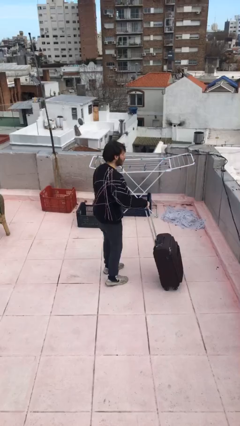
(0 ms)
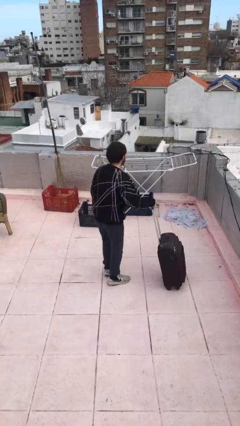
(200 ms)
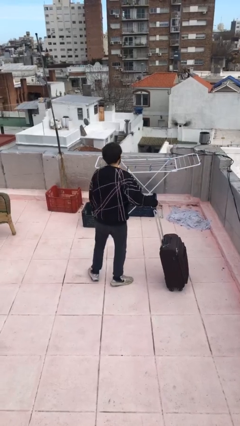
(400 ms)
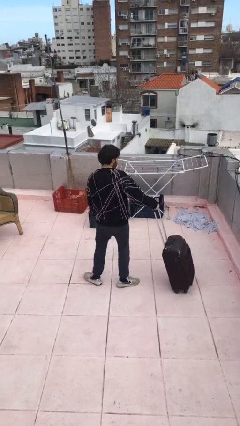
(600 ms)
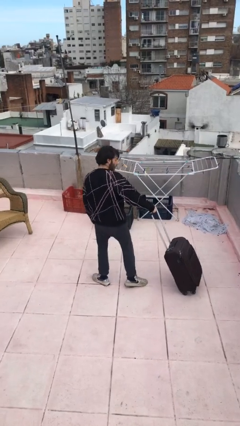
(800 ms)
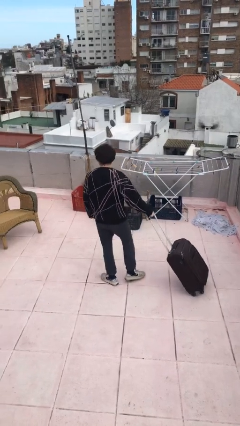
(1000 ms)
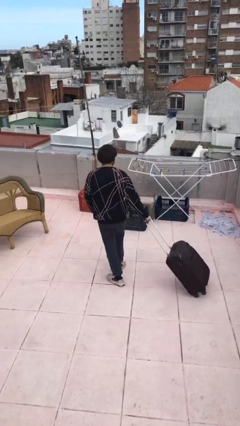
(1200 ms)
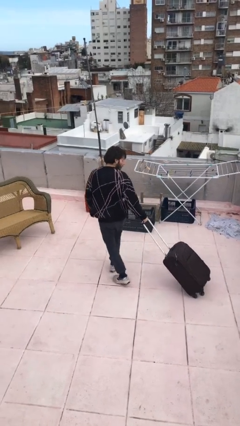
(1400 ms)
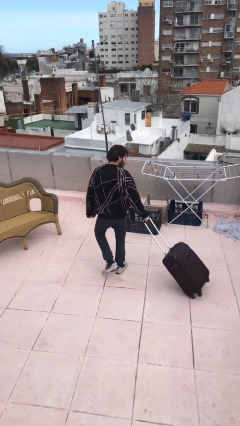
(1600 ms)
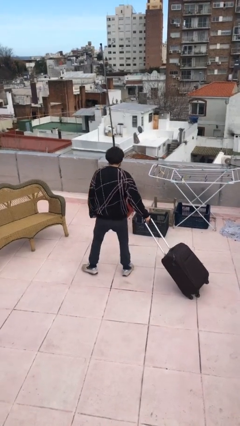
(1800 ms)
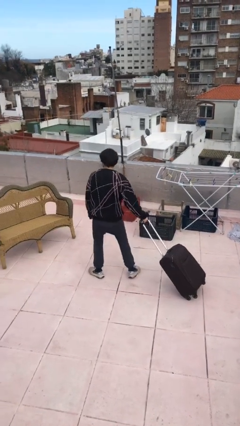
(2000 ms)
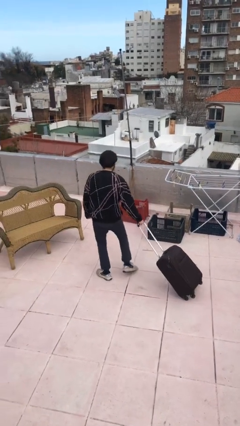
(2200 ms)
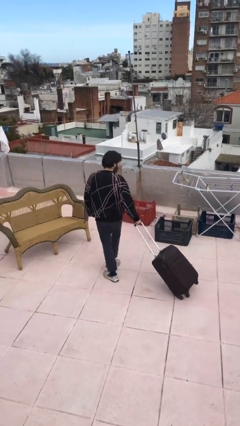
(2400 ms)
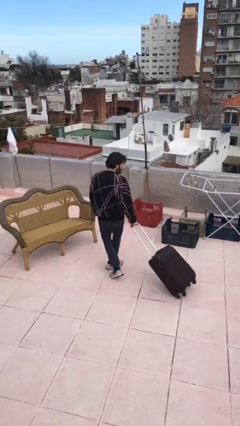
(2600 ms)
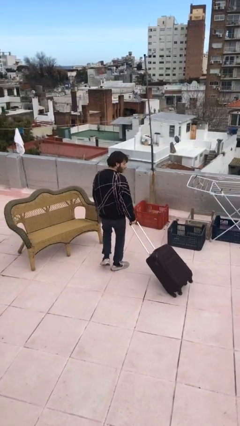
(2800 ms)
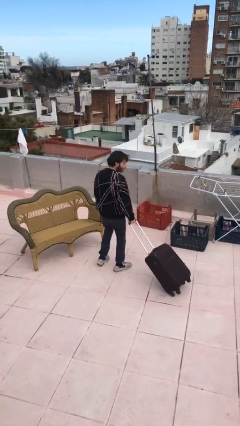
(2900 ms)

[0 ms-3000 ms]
person pulls wheeled cart

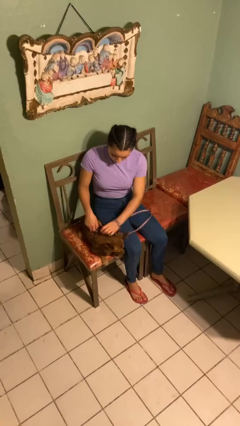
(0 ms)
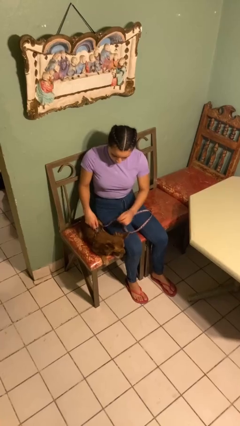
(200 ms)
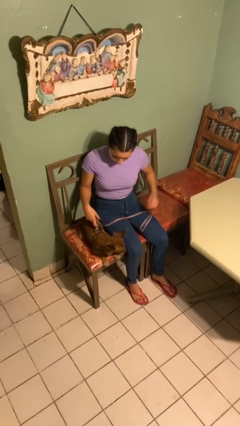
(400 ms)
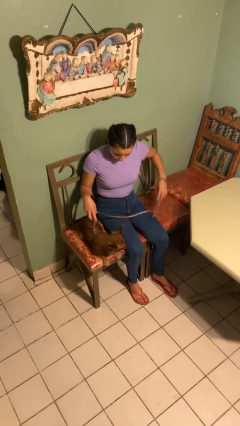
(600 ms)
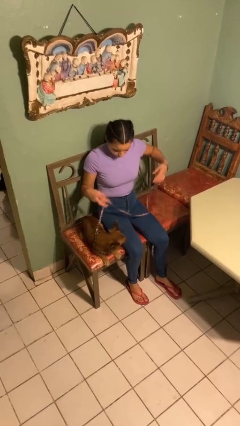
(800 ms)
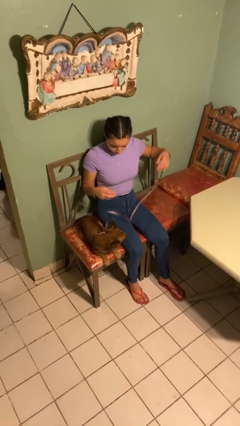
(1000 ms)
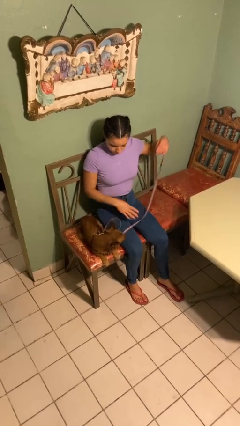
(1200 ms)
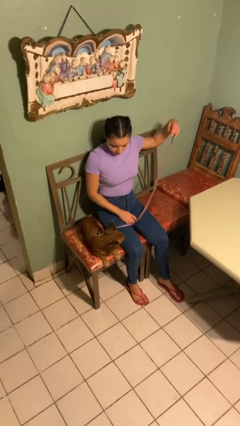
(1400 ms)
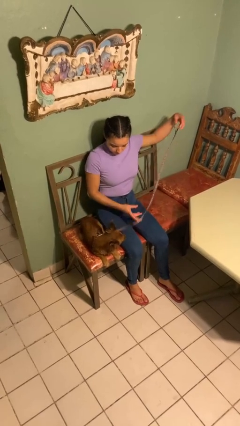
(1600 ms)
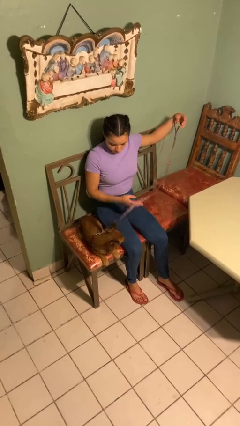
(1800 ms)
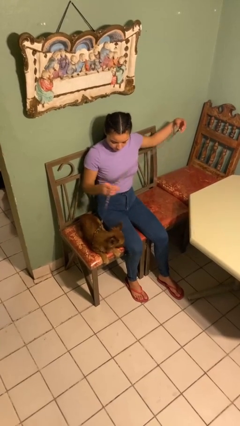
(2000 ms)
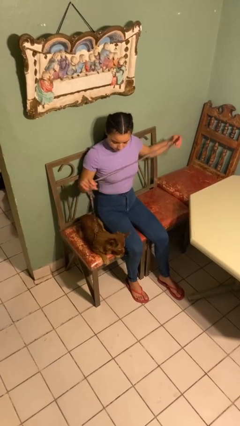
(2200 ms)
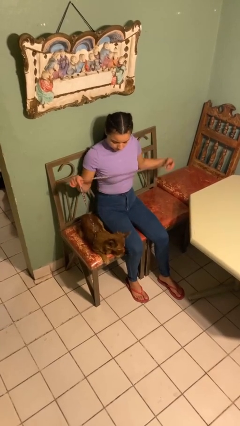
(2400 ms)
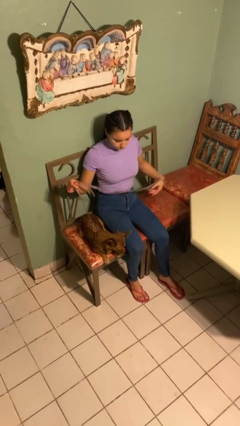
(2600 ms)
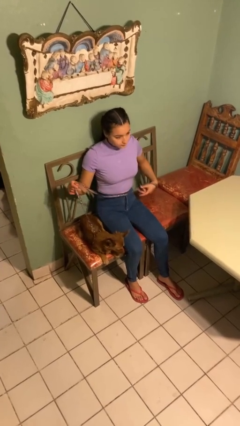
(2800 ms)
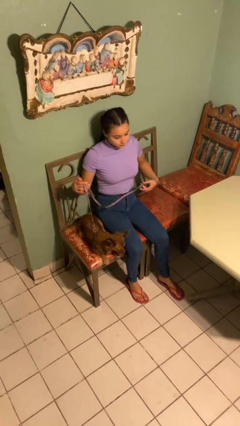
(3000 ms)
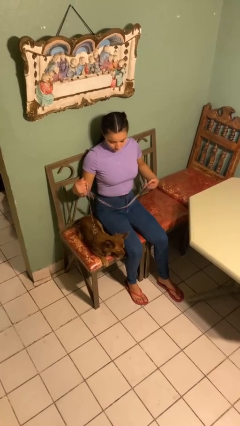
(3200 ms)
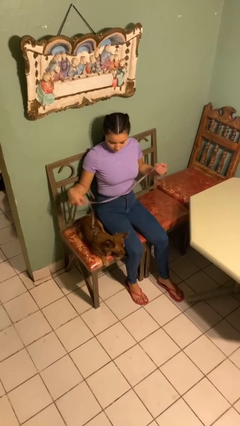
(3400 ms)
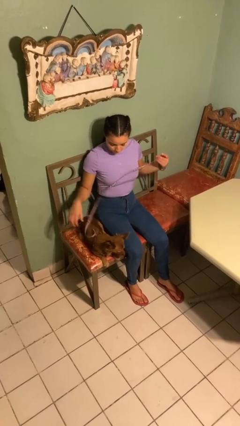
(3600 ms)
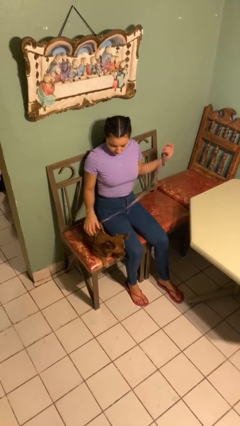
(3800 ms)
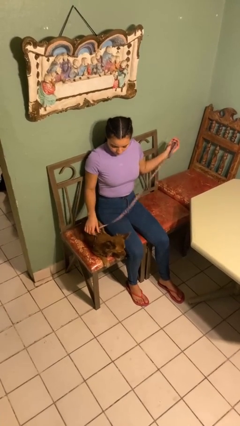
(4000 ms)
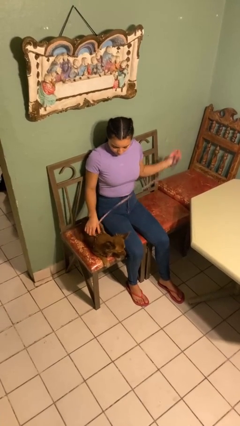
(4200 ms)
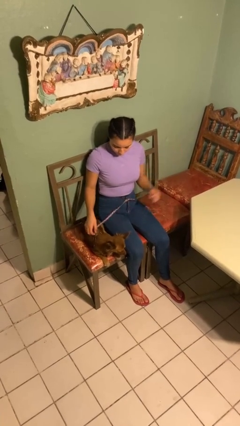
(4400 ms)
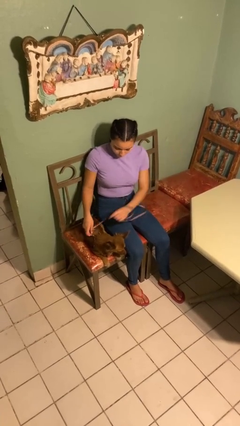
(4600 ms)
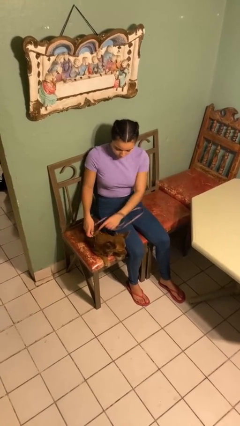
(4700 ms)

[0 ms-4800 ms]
person attaches leash to dog

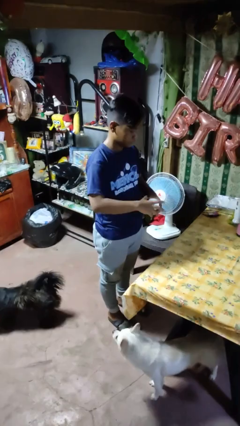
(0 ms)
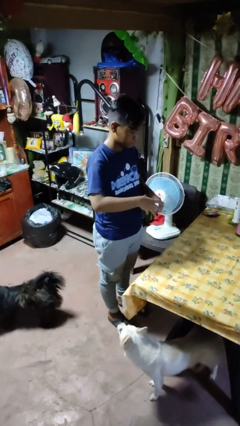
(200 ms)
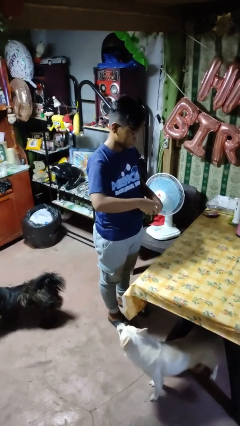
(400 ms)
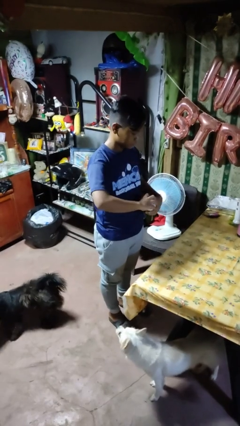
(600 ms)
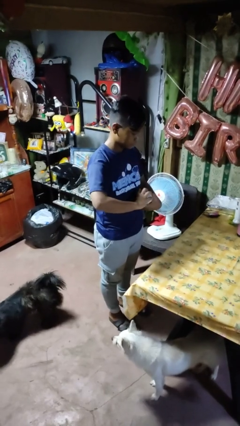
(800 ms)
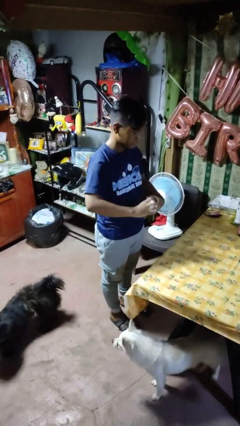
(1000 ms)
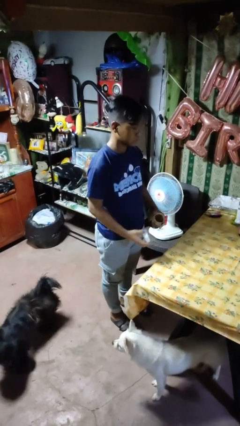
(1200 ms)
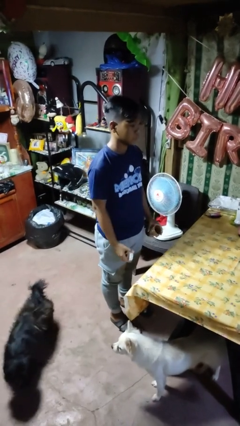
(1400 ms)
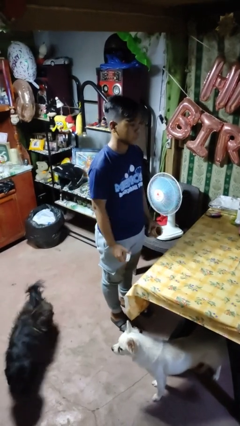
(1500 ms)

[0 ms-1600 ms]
person opens jar

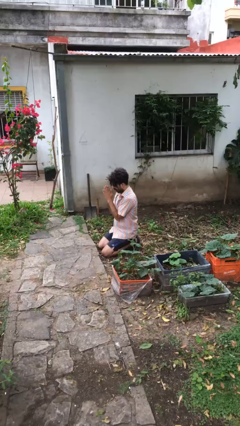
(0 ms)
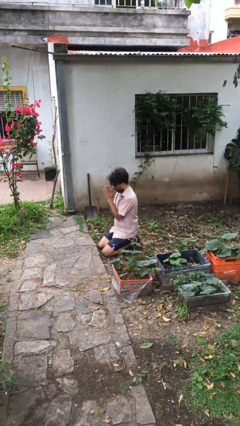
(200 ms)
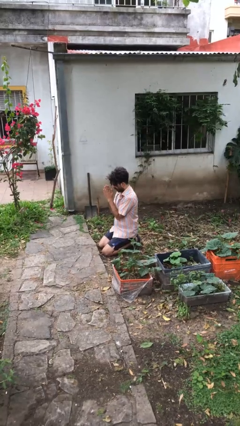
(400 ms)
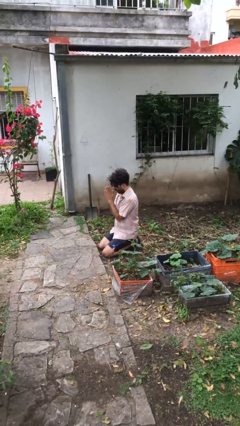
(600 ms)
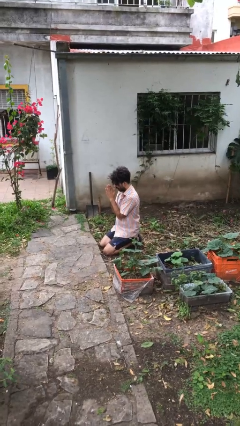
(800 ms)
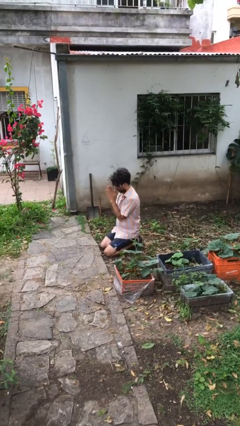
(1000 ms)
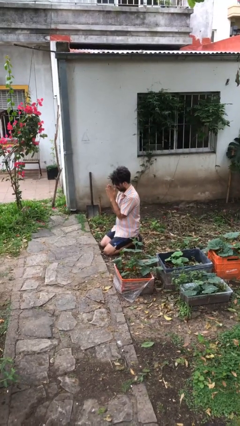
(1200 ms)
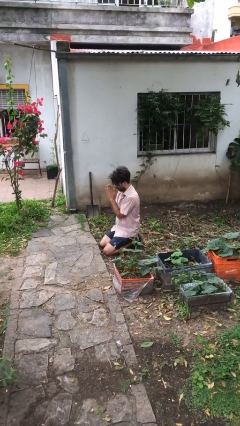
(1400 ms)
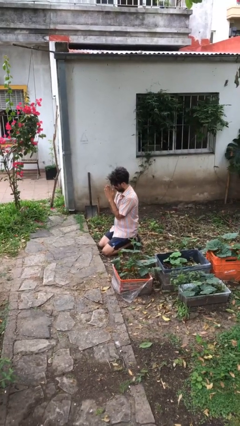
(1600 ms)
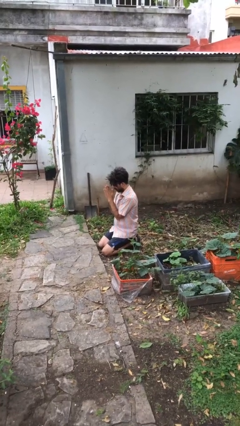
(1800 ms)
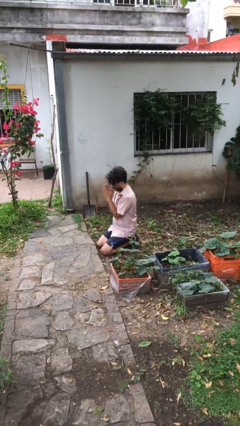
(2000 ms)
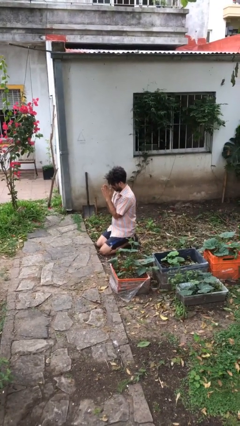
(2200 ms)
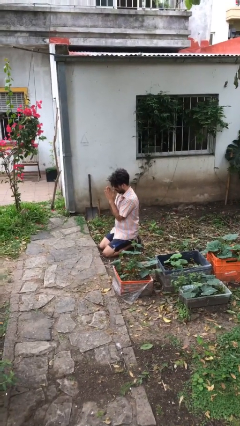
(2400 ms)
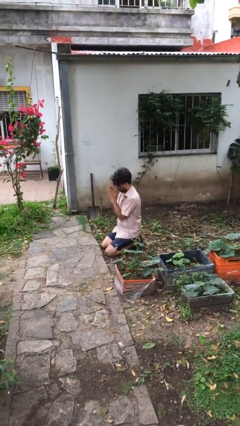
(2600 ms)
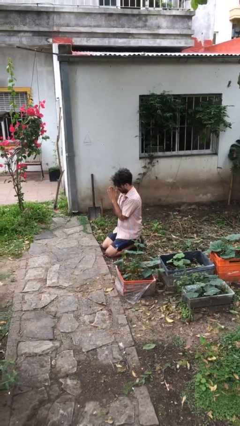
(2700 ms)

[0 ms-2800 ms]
person prays

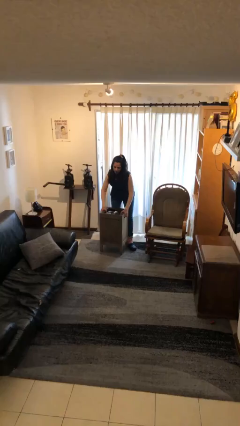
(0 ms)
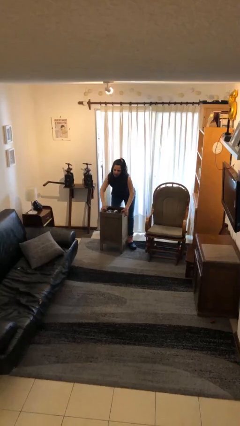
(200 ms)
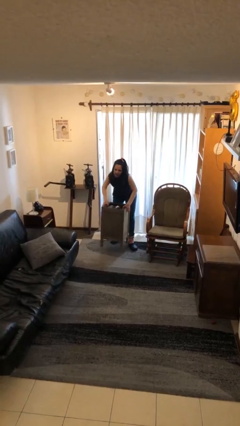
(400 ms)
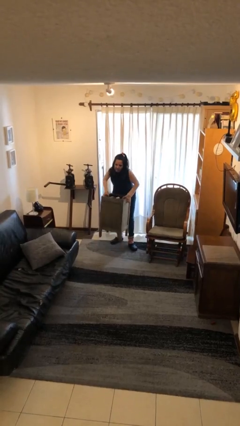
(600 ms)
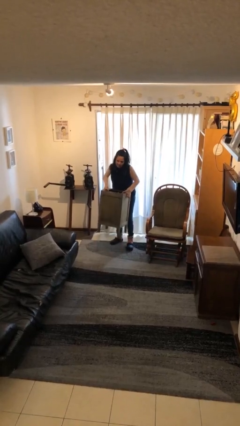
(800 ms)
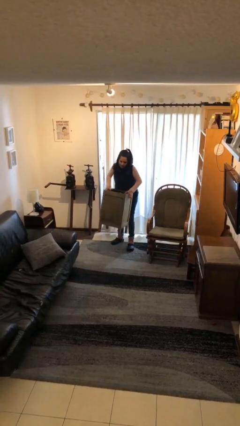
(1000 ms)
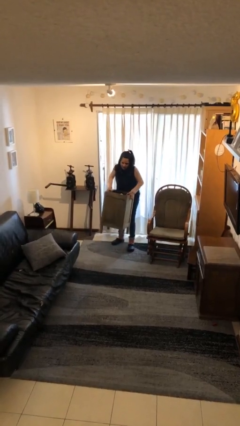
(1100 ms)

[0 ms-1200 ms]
person picks up object from floor

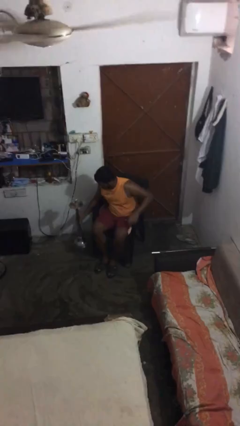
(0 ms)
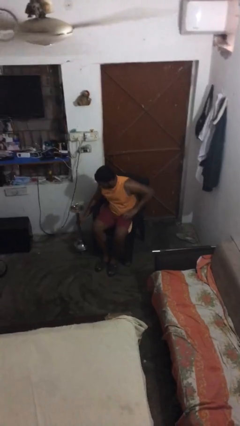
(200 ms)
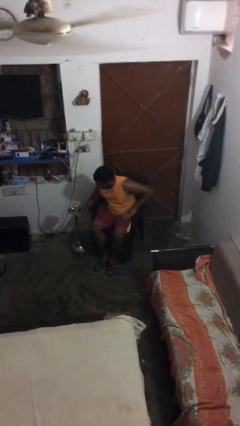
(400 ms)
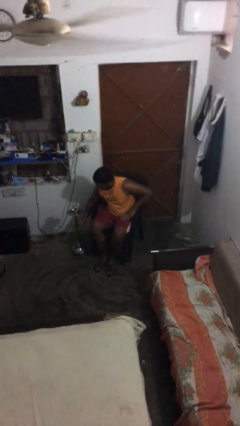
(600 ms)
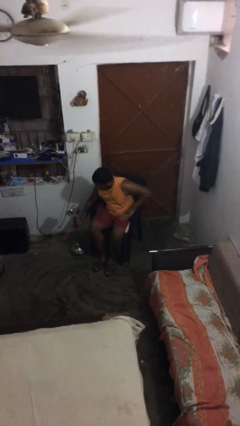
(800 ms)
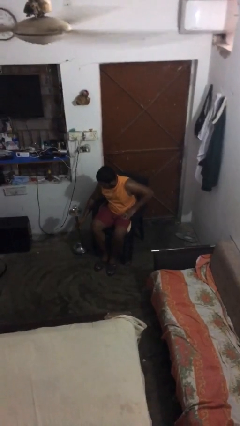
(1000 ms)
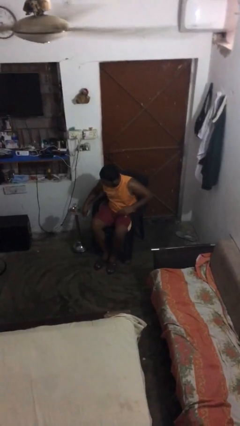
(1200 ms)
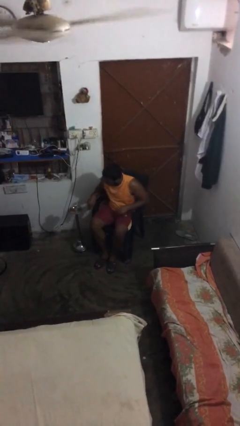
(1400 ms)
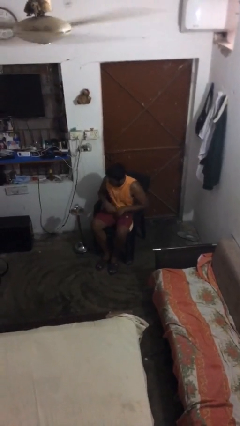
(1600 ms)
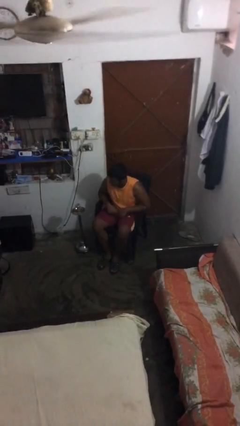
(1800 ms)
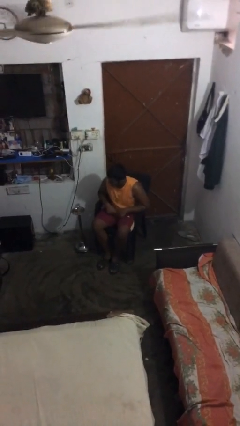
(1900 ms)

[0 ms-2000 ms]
person puts down object on floor

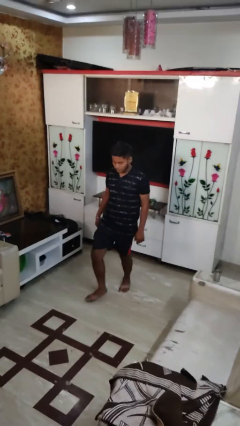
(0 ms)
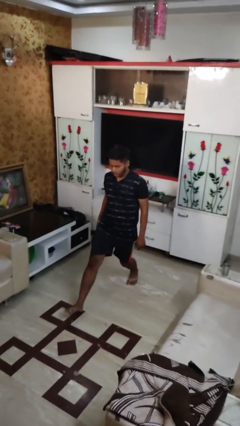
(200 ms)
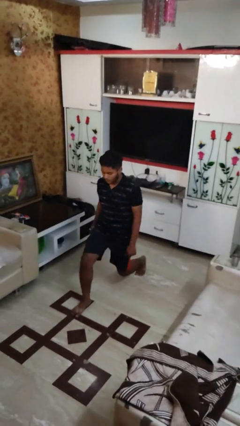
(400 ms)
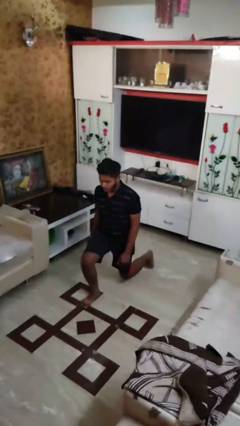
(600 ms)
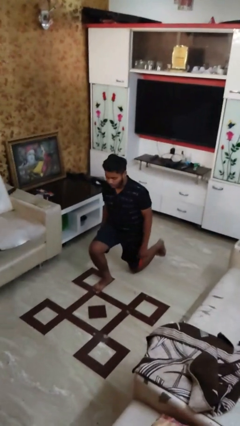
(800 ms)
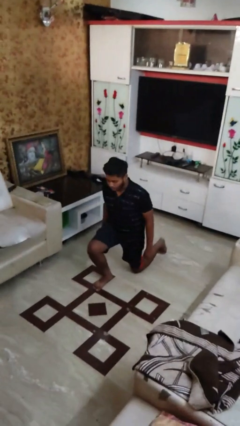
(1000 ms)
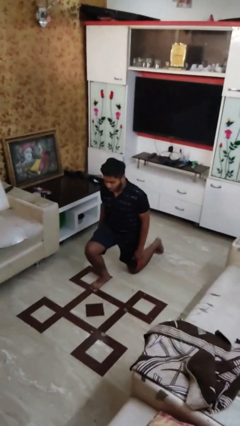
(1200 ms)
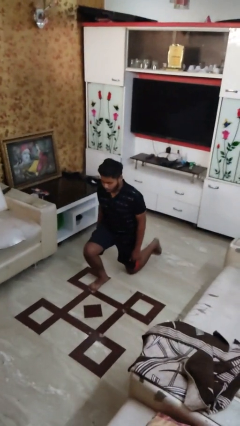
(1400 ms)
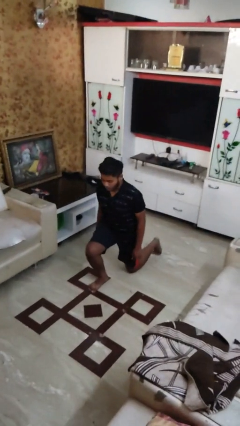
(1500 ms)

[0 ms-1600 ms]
person exercises with lunges

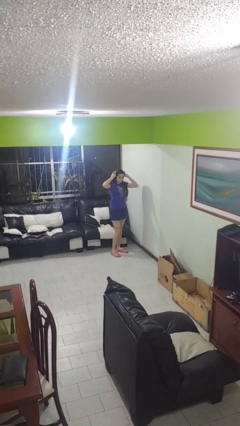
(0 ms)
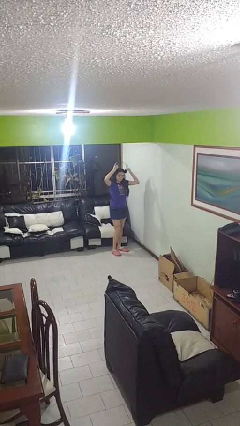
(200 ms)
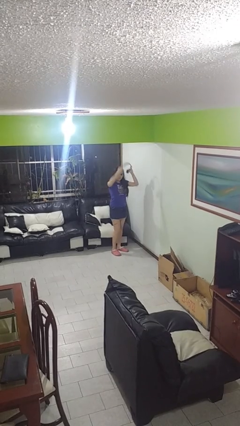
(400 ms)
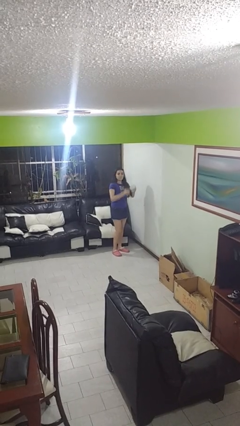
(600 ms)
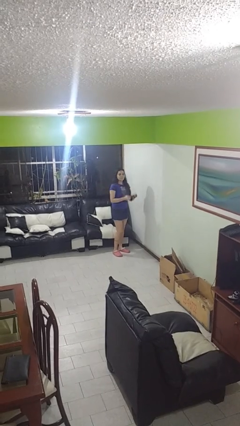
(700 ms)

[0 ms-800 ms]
person takes off headphones
